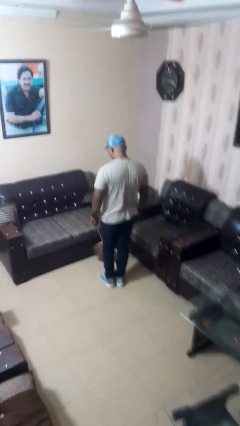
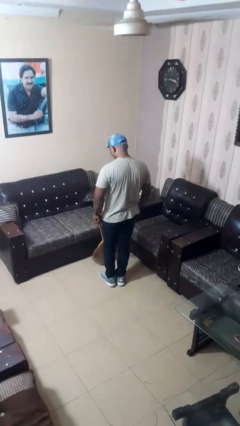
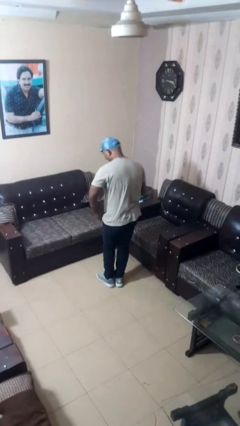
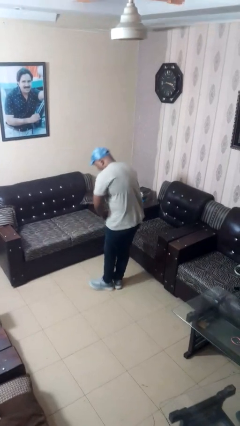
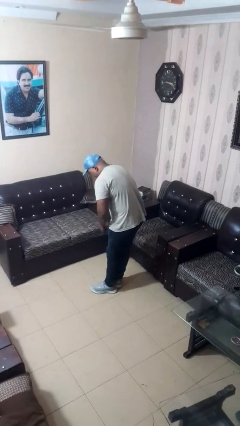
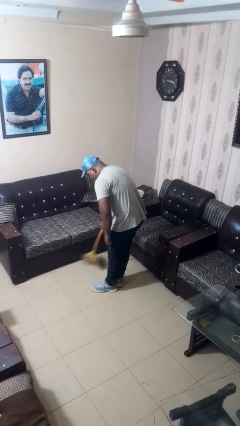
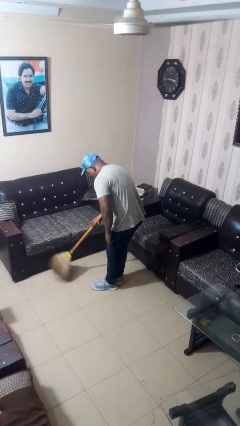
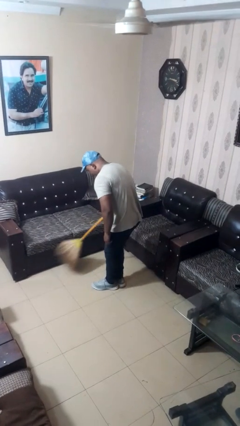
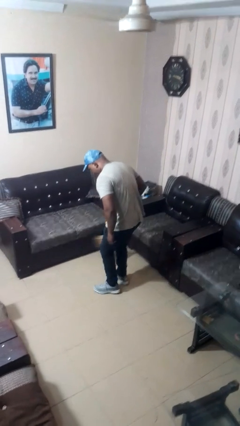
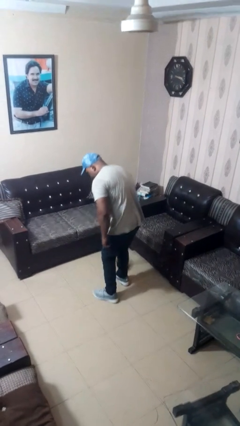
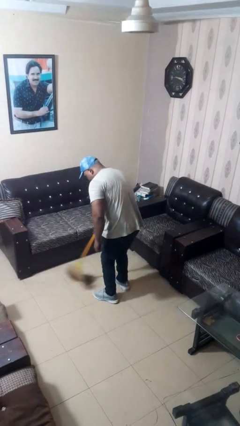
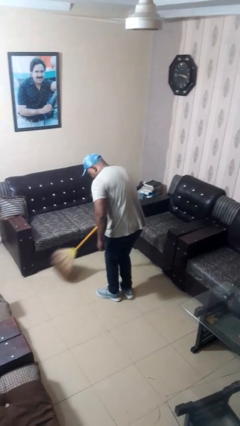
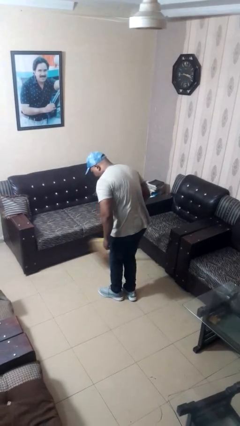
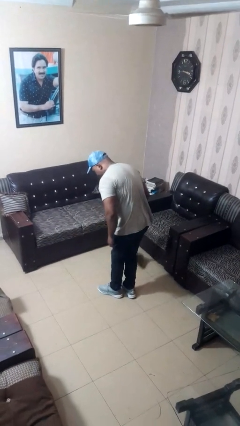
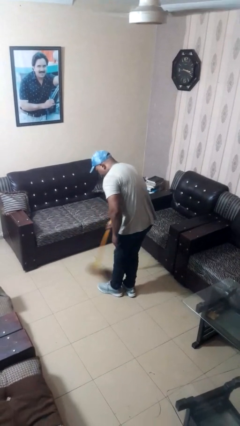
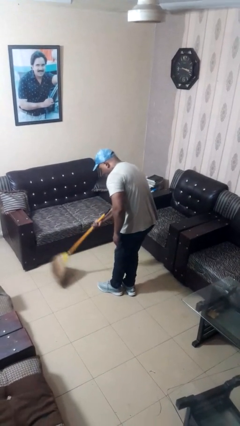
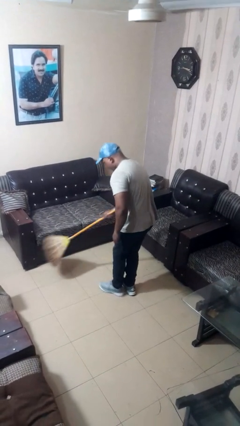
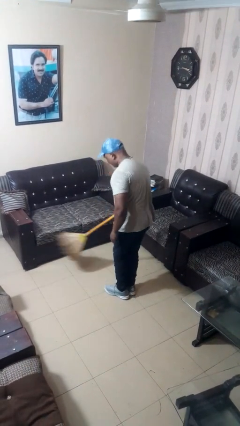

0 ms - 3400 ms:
person sweeps floor

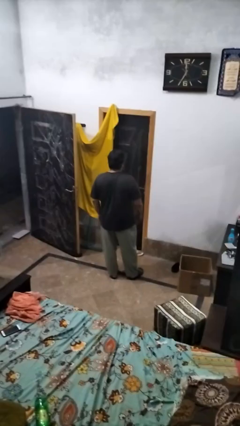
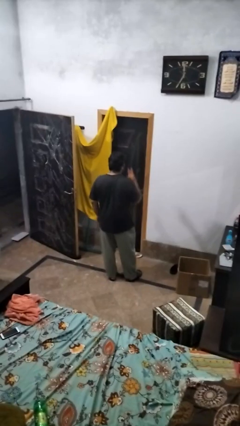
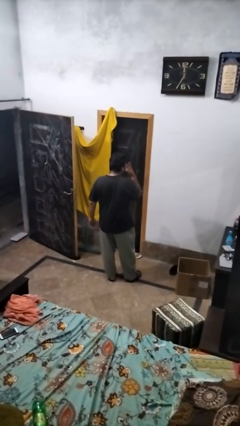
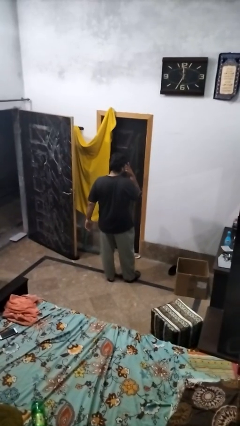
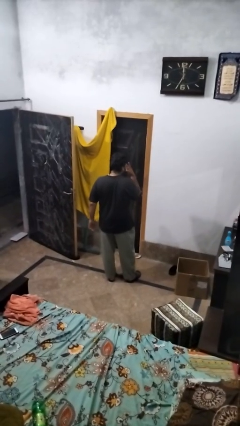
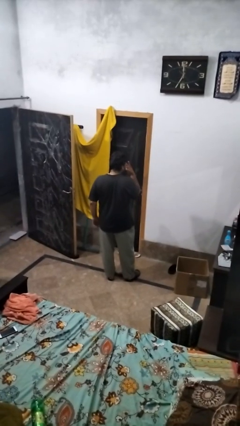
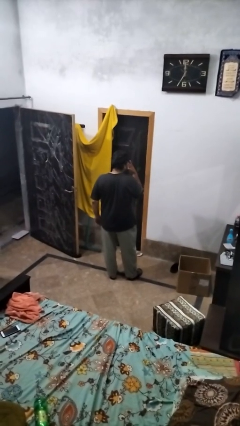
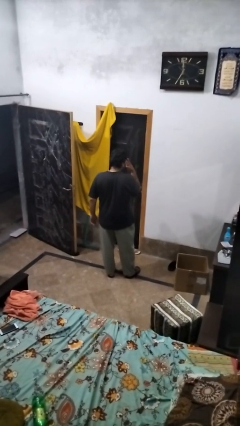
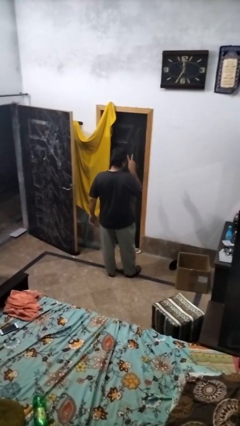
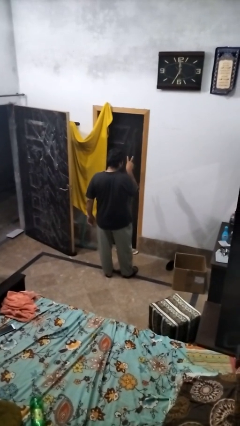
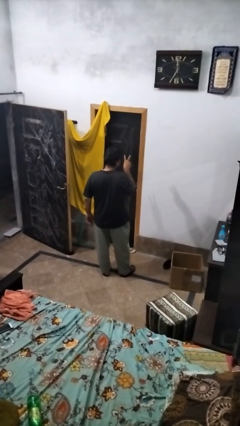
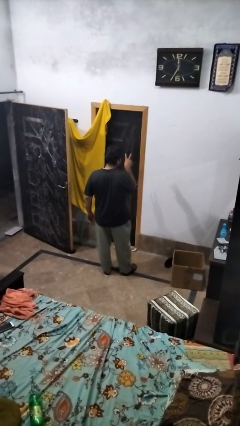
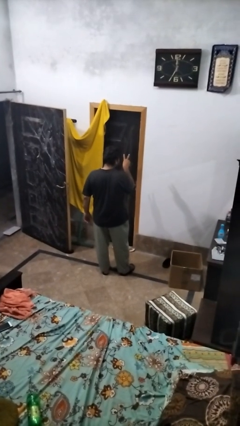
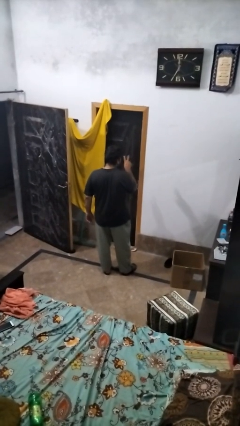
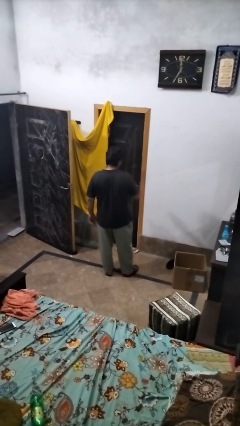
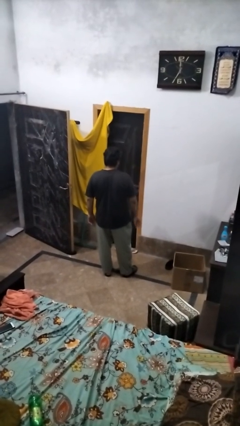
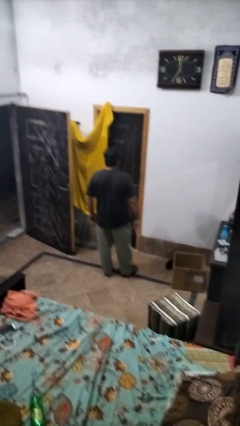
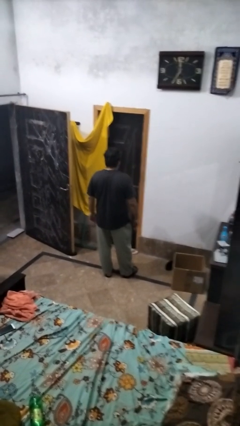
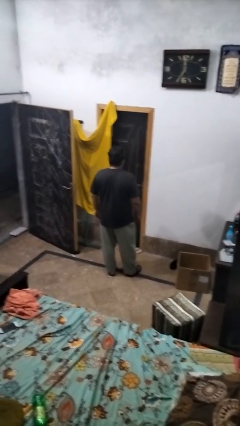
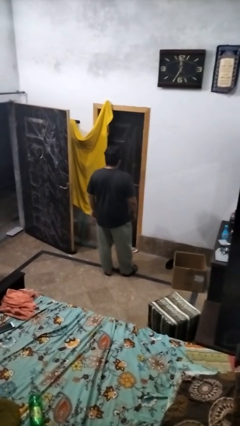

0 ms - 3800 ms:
person gestures watch closely

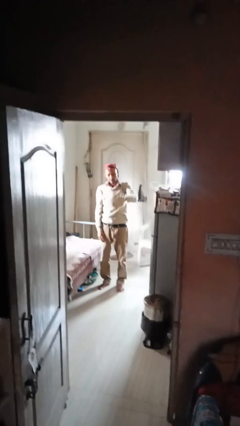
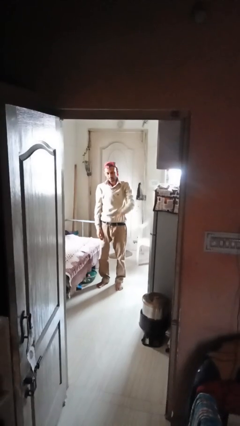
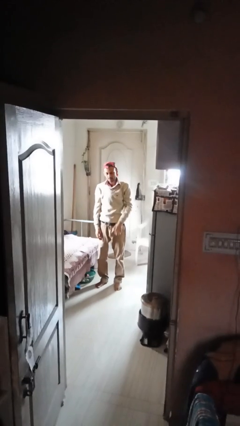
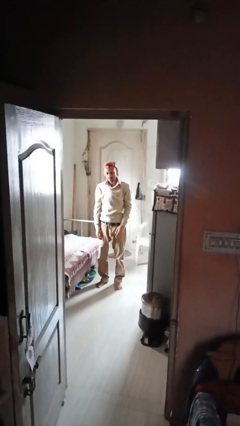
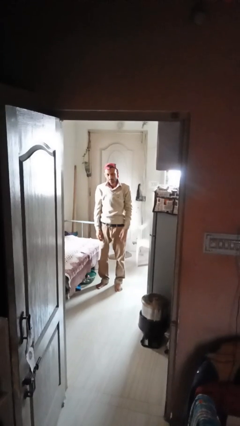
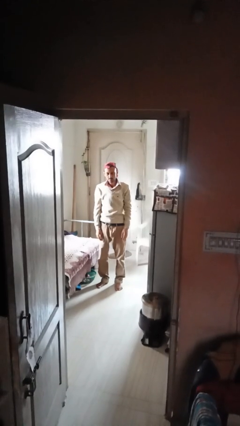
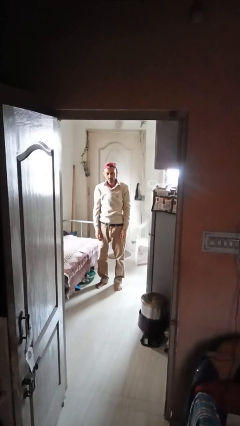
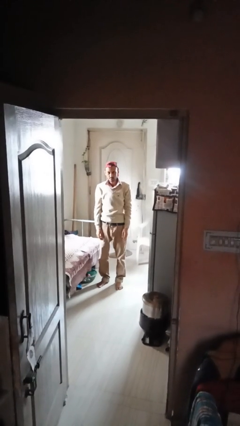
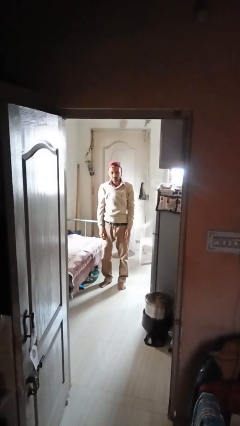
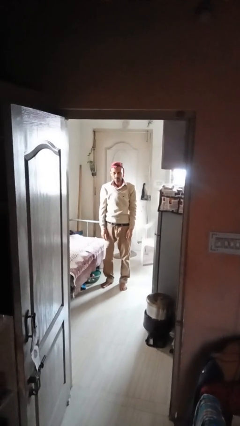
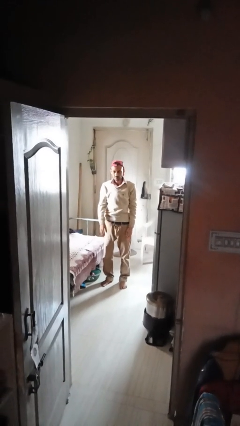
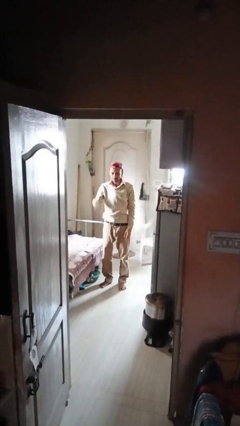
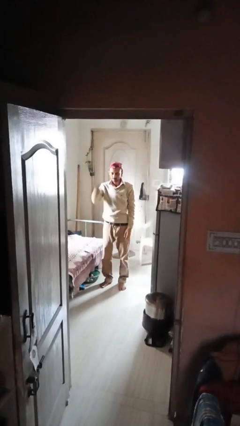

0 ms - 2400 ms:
person gestures lower hand

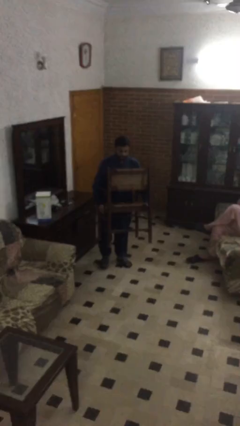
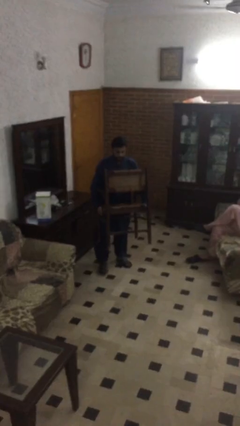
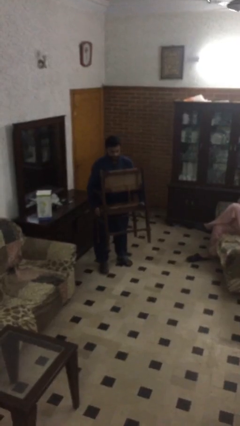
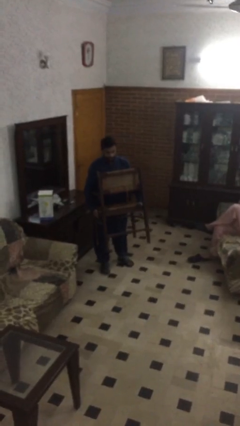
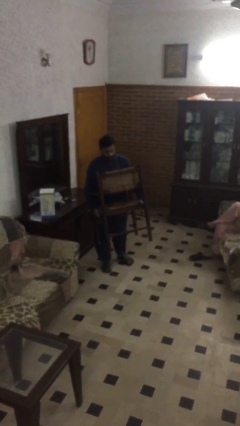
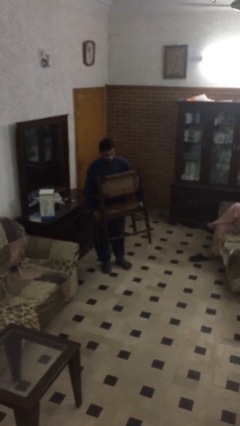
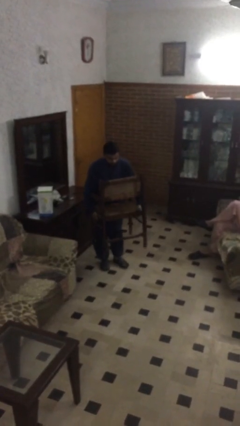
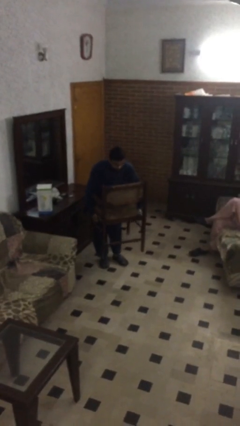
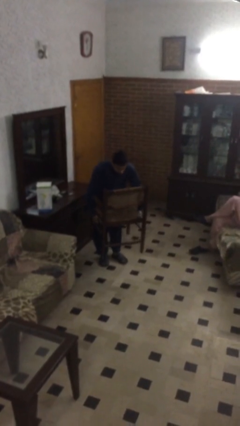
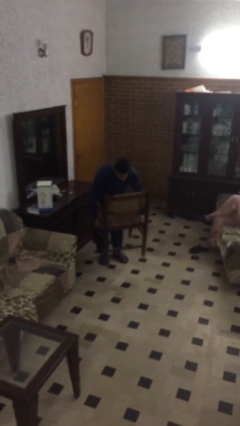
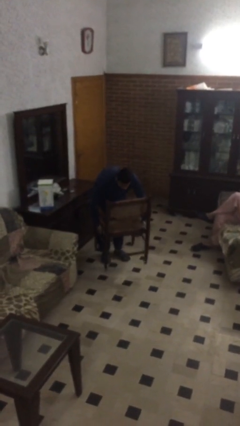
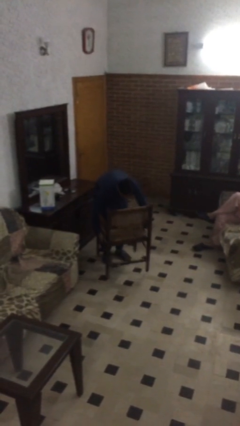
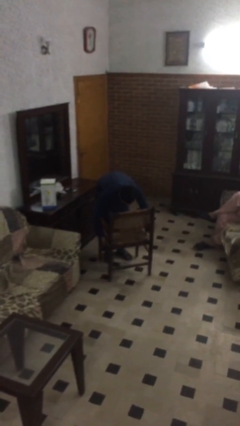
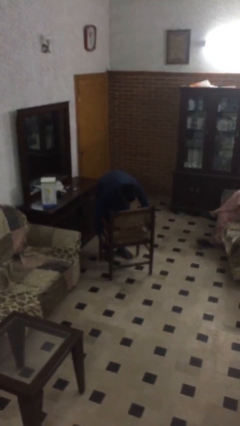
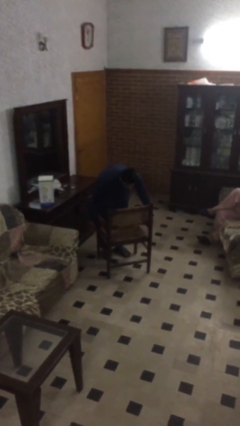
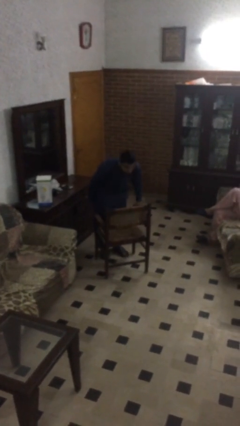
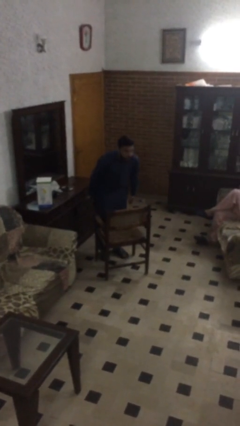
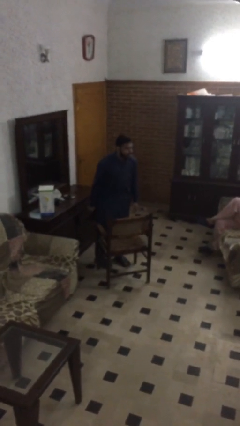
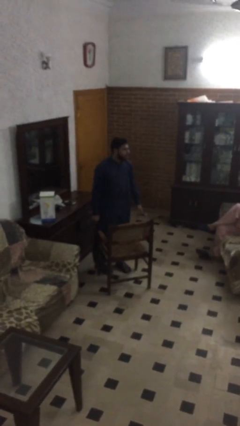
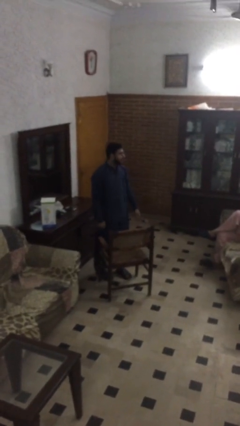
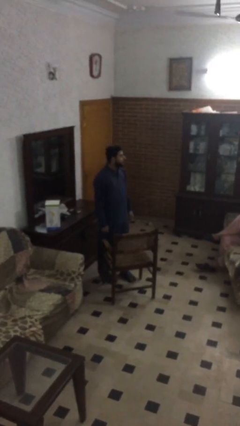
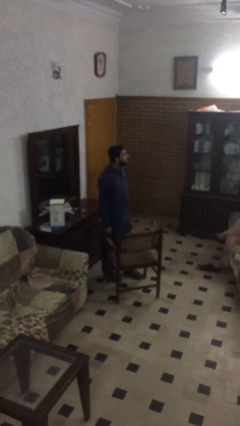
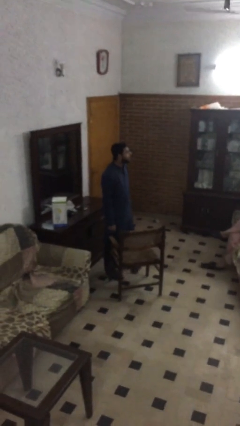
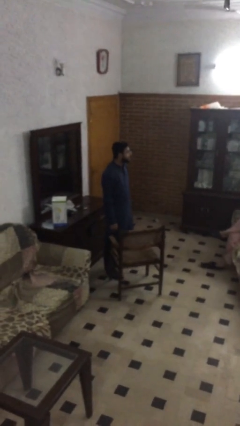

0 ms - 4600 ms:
person puts down object on floor

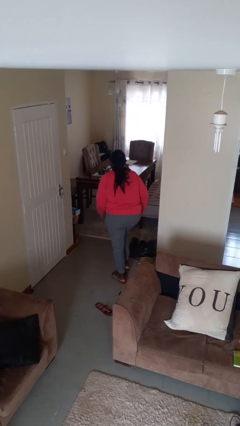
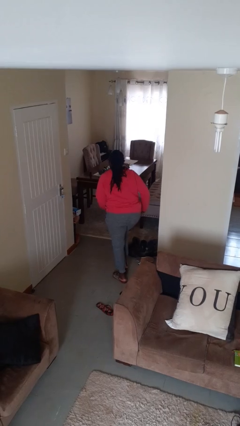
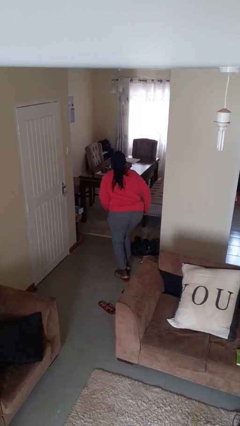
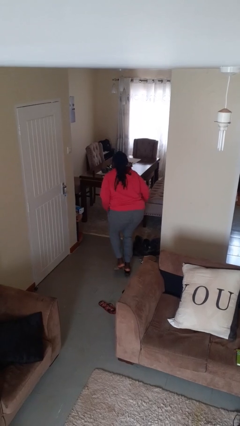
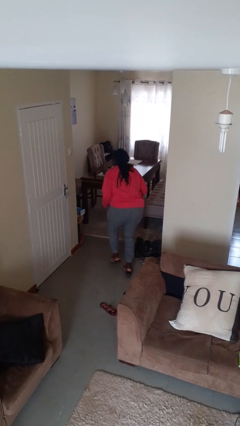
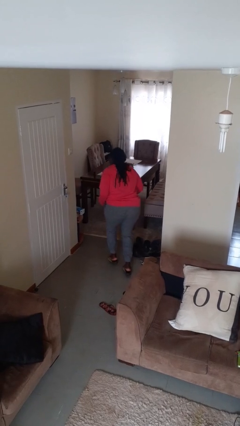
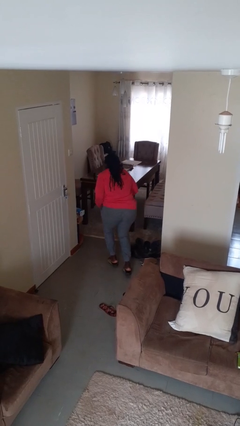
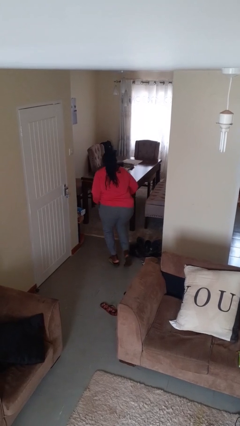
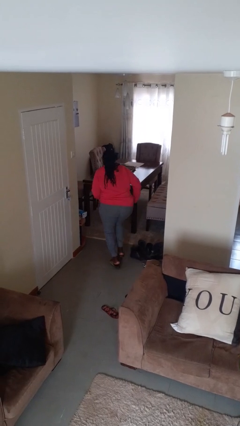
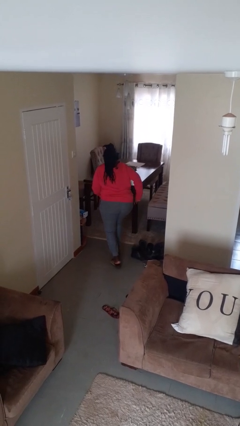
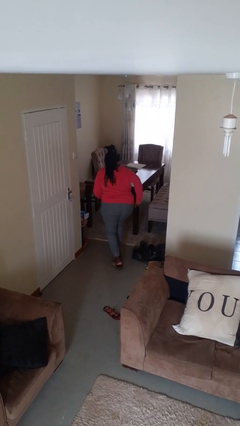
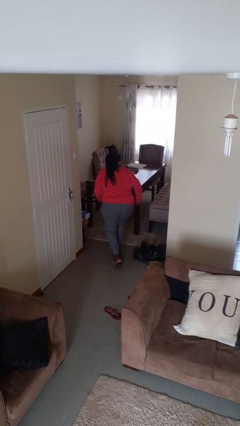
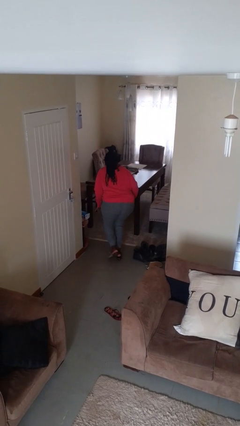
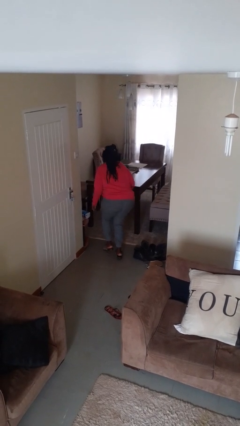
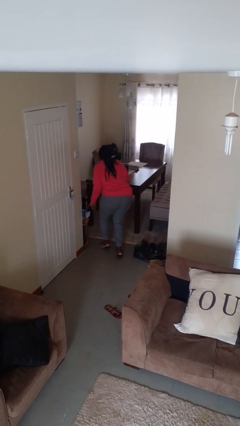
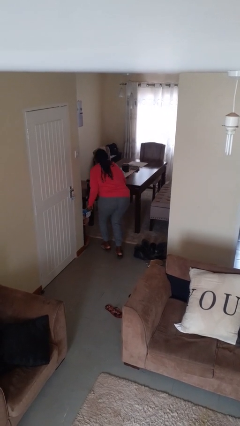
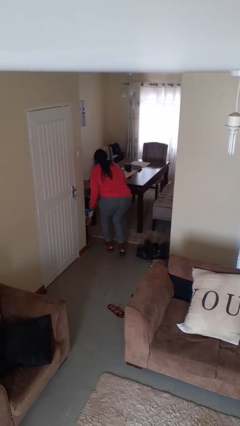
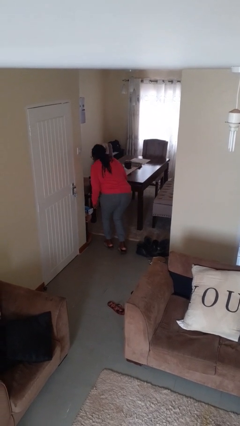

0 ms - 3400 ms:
person walks tiptoe
